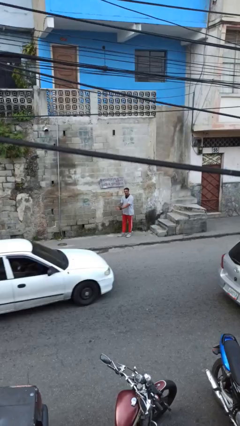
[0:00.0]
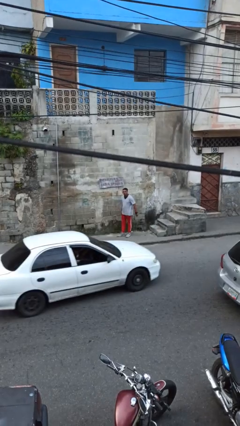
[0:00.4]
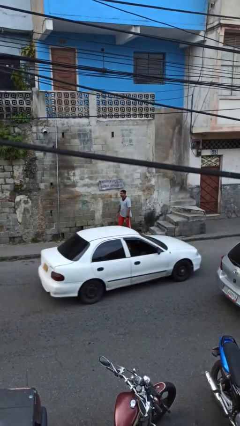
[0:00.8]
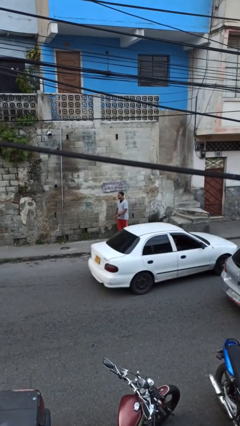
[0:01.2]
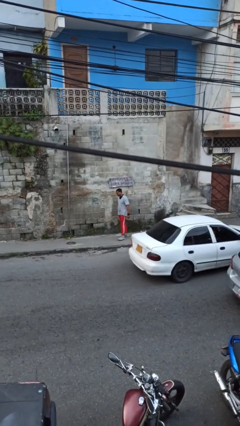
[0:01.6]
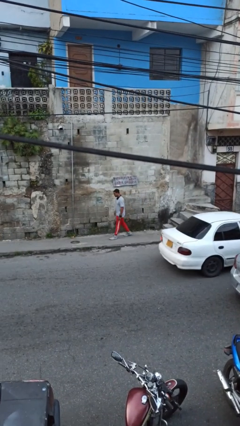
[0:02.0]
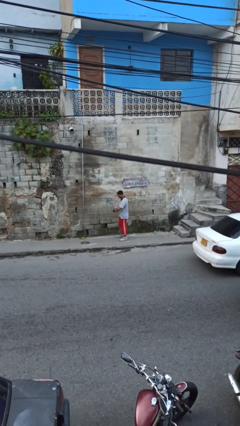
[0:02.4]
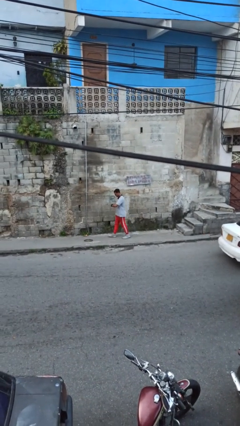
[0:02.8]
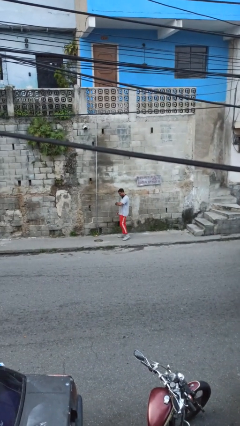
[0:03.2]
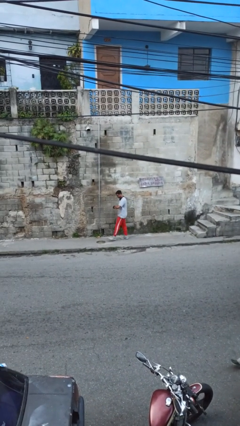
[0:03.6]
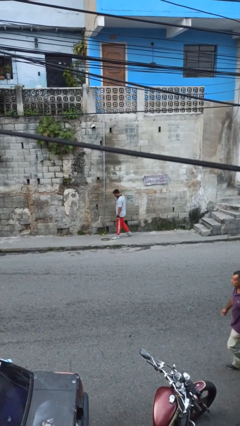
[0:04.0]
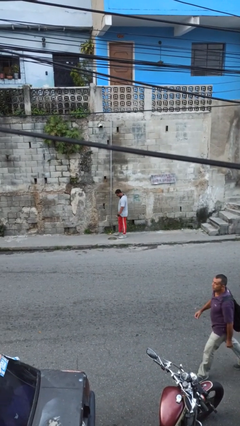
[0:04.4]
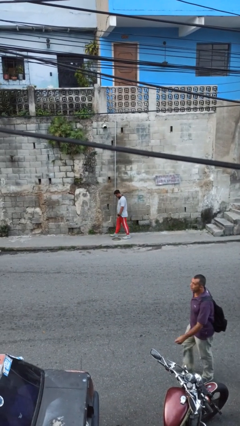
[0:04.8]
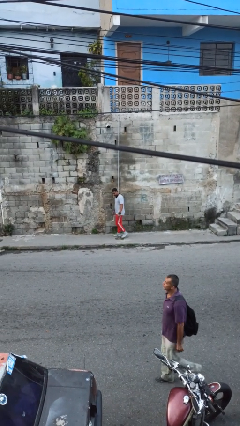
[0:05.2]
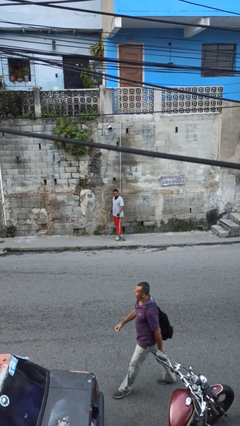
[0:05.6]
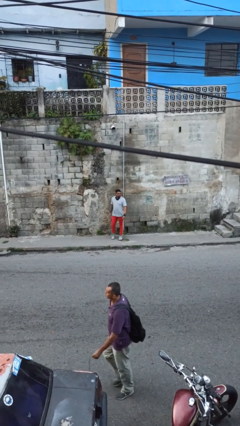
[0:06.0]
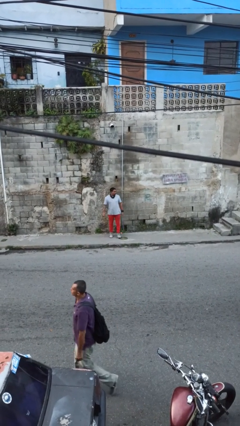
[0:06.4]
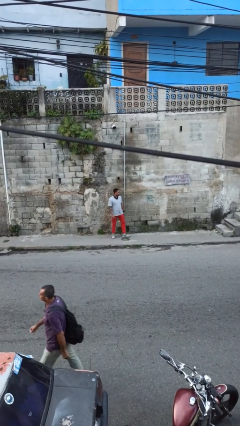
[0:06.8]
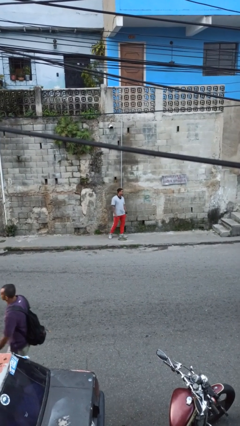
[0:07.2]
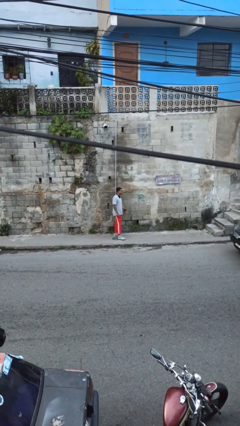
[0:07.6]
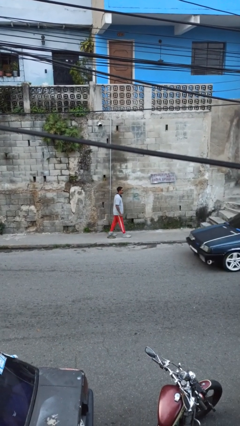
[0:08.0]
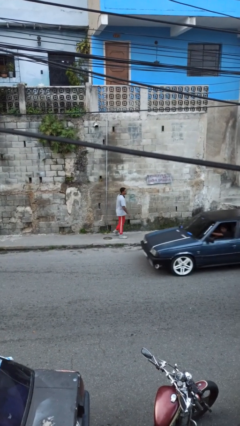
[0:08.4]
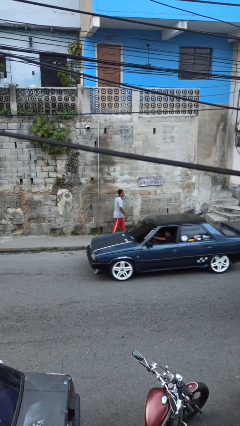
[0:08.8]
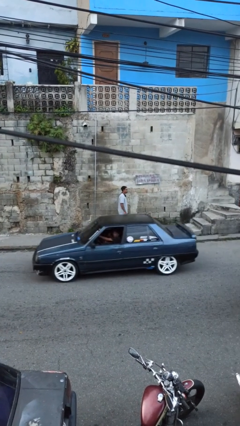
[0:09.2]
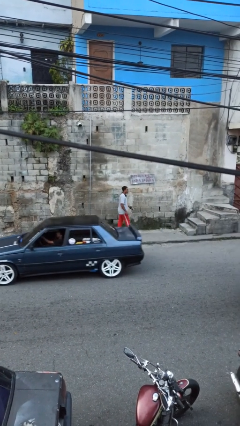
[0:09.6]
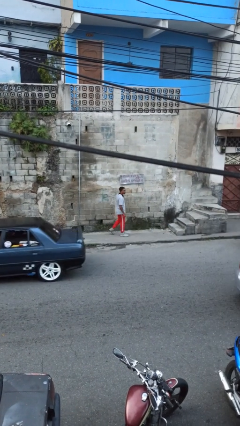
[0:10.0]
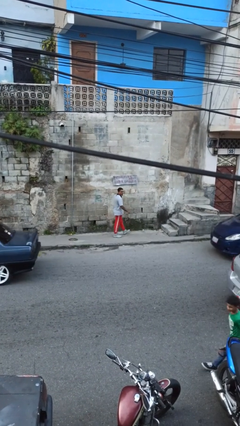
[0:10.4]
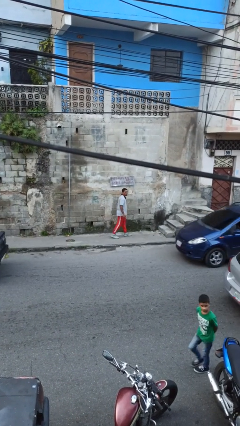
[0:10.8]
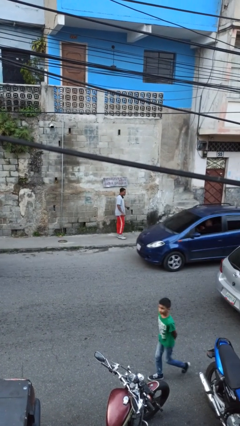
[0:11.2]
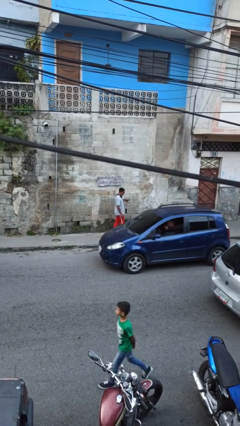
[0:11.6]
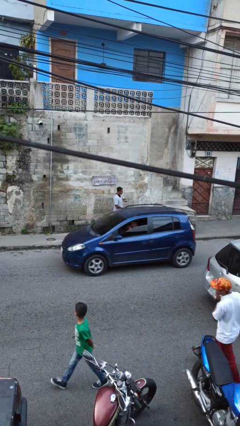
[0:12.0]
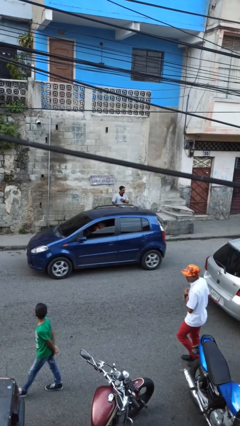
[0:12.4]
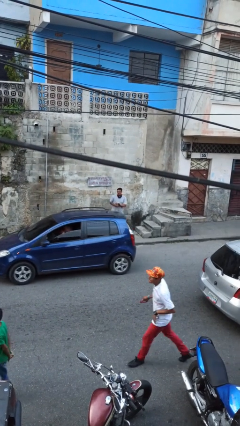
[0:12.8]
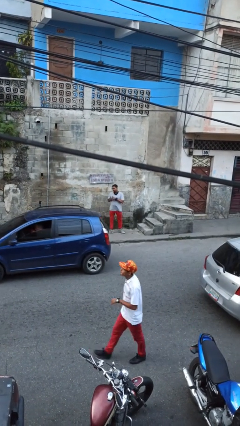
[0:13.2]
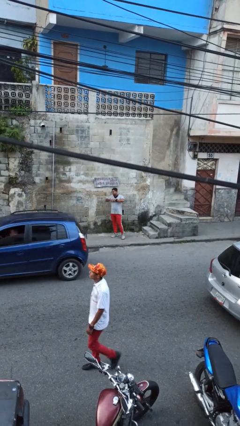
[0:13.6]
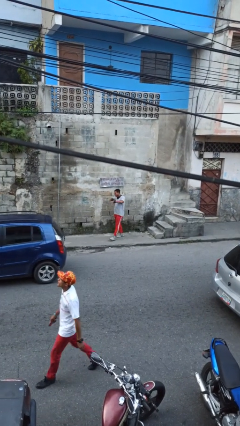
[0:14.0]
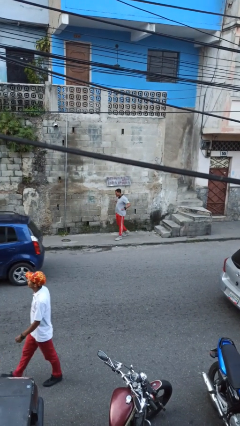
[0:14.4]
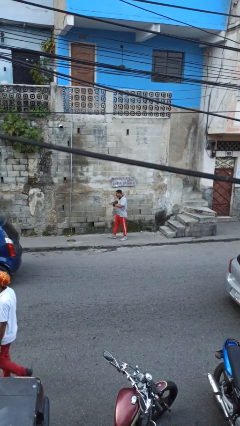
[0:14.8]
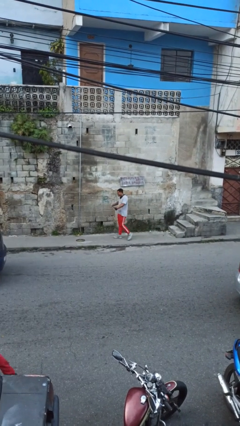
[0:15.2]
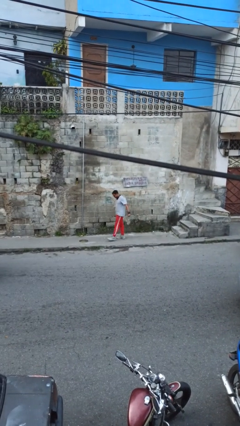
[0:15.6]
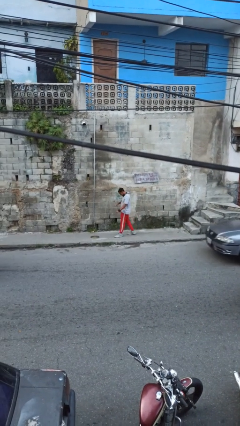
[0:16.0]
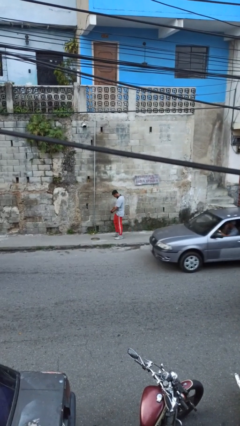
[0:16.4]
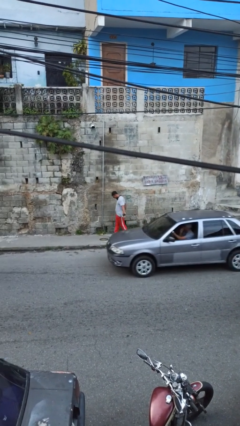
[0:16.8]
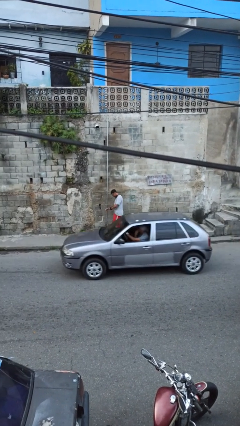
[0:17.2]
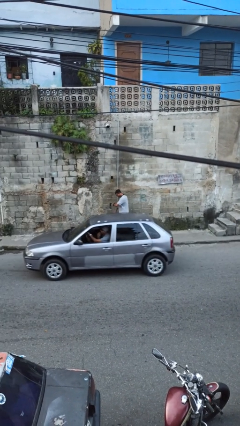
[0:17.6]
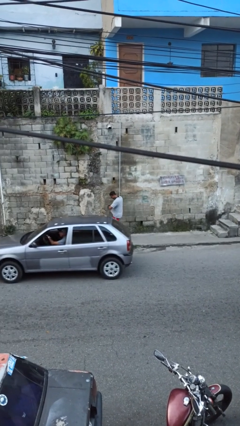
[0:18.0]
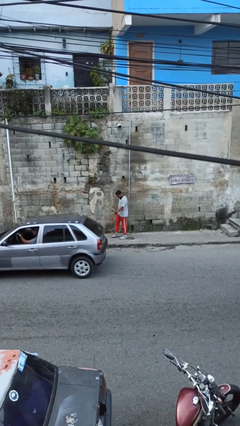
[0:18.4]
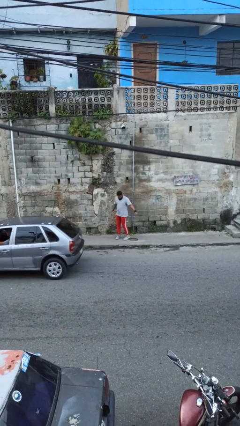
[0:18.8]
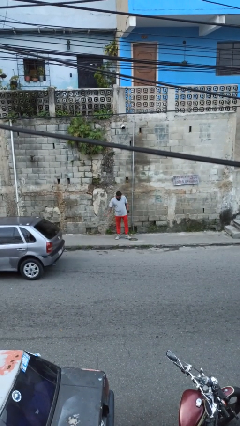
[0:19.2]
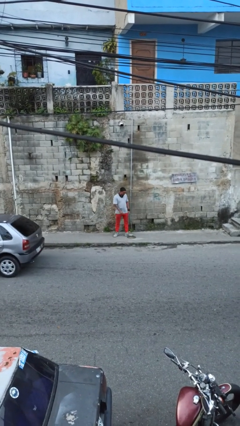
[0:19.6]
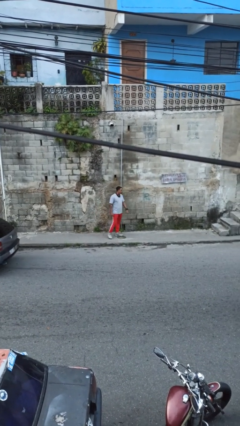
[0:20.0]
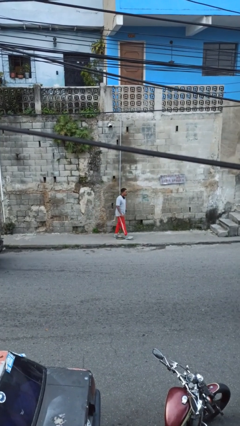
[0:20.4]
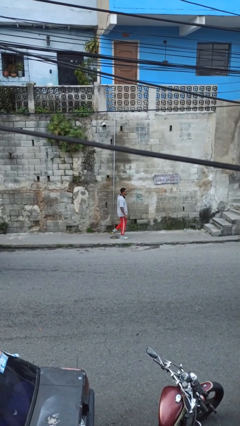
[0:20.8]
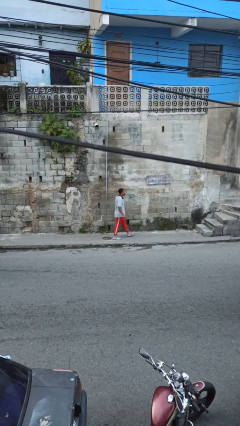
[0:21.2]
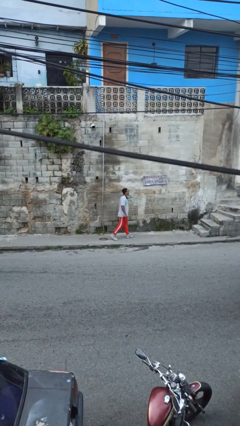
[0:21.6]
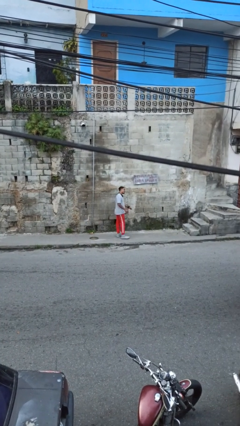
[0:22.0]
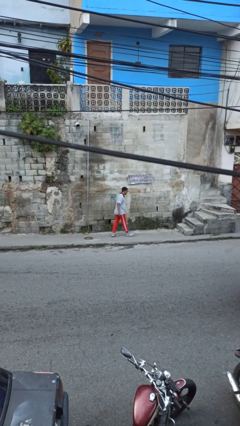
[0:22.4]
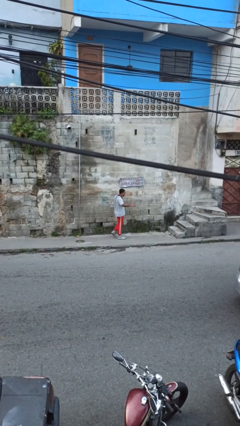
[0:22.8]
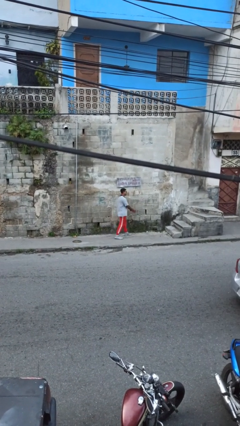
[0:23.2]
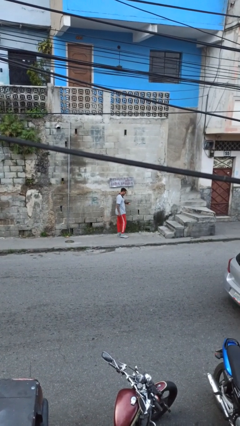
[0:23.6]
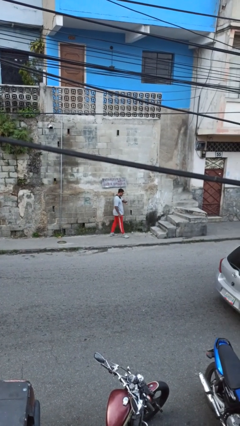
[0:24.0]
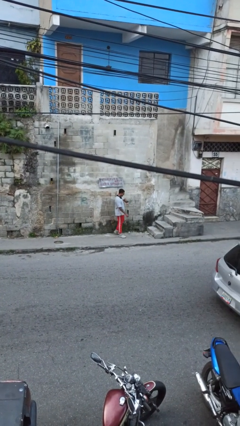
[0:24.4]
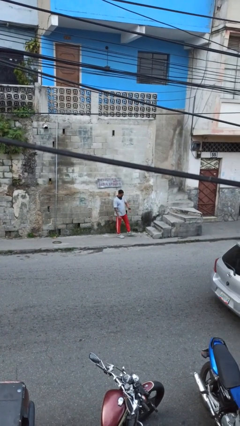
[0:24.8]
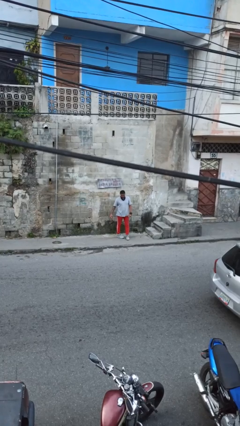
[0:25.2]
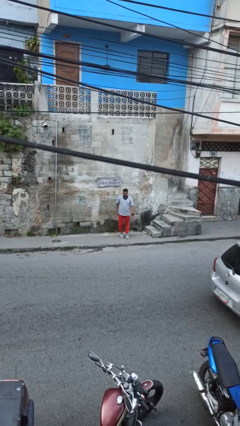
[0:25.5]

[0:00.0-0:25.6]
person walks

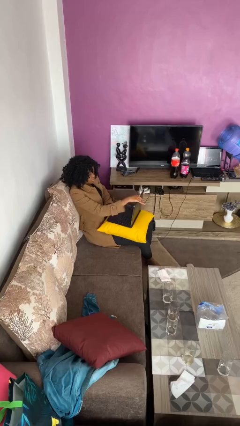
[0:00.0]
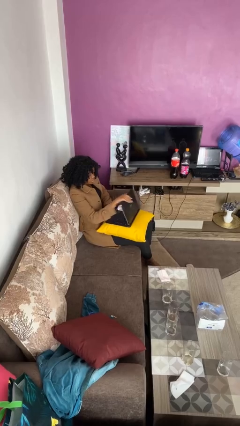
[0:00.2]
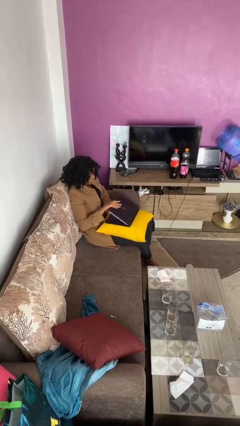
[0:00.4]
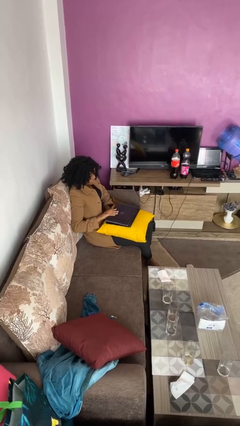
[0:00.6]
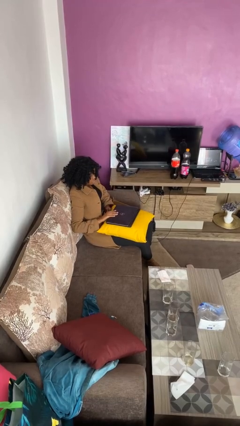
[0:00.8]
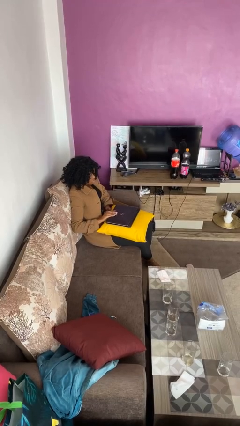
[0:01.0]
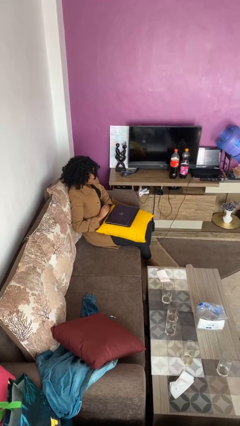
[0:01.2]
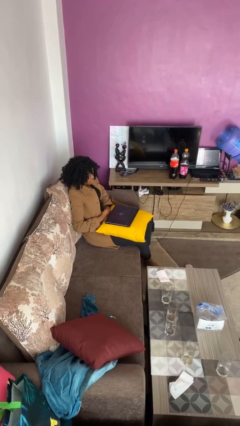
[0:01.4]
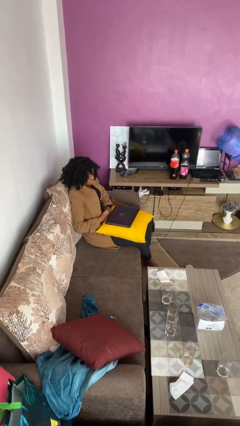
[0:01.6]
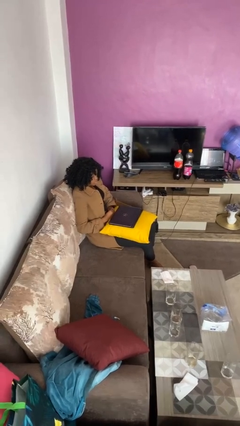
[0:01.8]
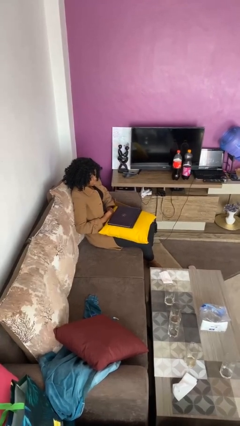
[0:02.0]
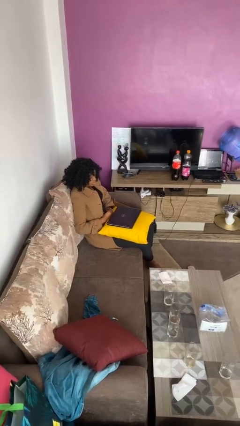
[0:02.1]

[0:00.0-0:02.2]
person closes laptop

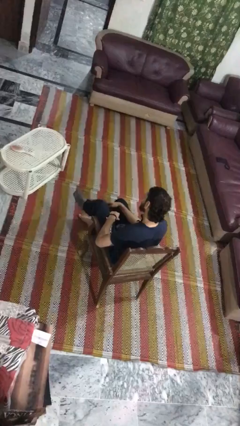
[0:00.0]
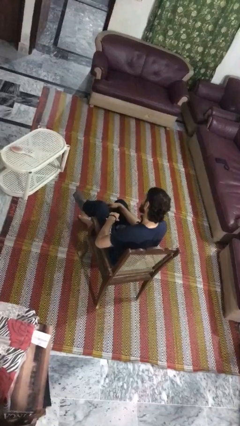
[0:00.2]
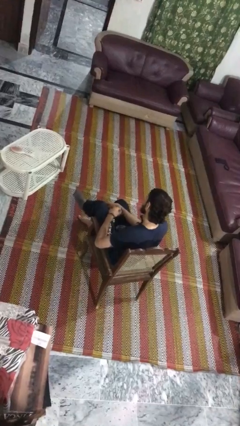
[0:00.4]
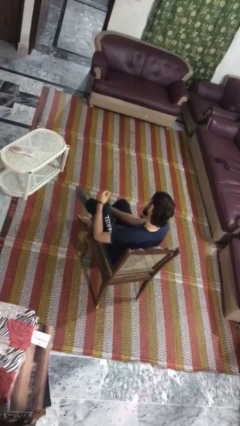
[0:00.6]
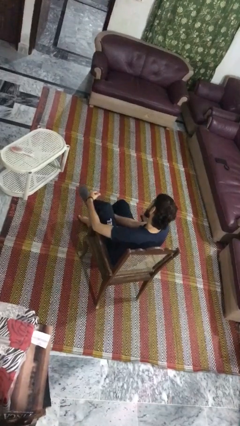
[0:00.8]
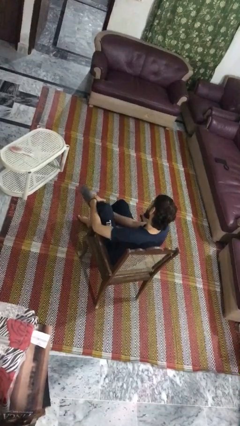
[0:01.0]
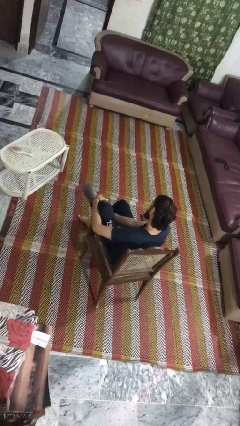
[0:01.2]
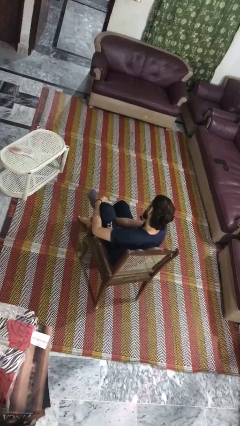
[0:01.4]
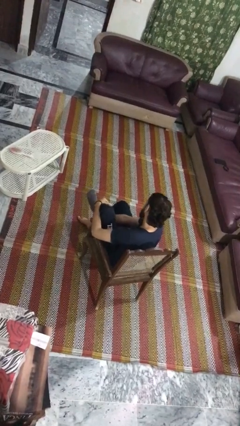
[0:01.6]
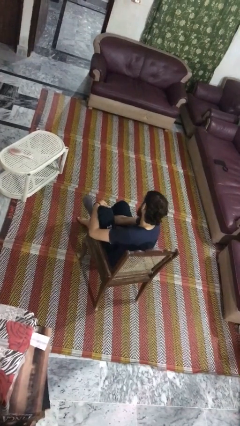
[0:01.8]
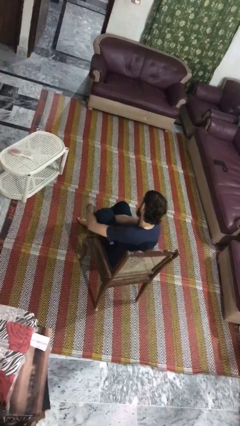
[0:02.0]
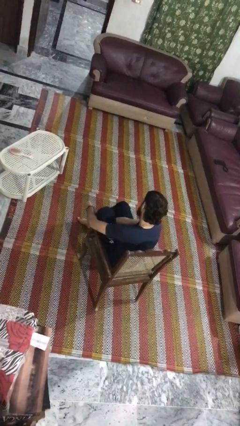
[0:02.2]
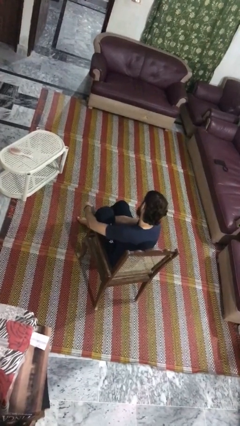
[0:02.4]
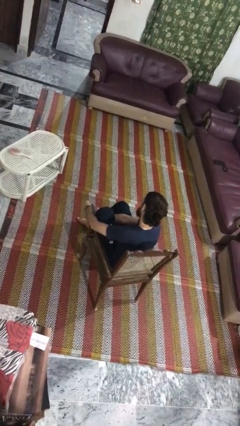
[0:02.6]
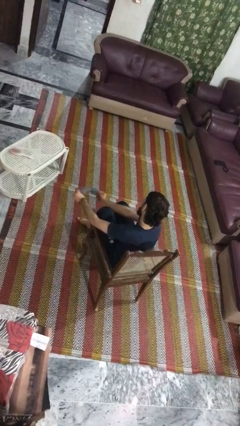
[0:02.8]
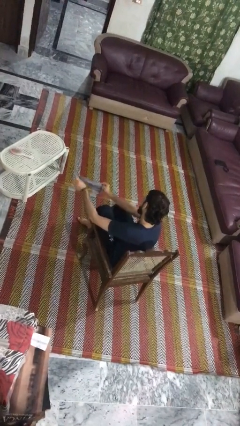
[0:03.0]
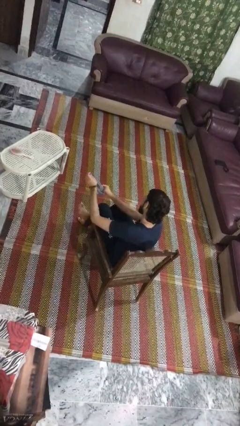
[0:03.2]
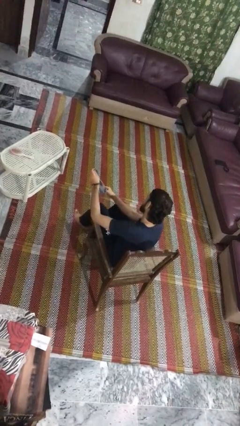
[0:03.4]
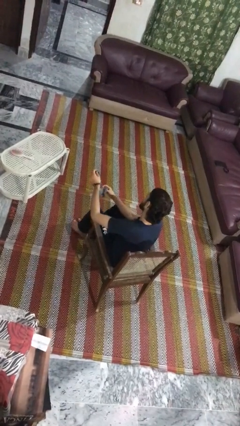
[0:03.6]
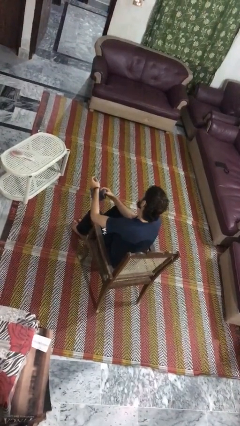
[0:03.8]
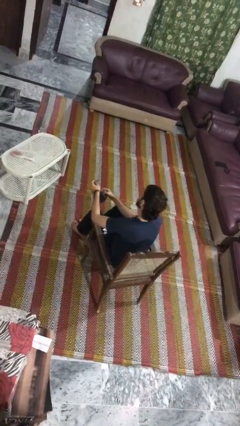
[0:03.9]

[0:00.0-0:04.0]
person takes off socks
